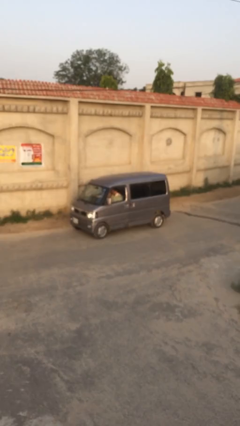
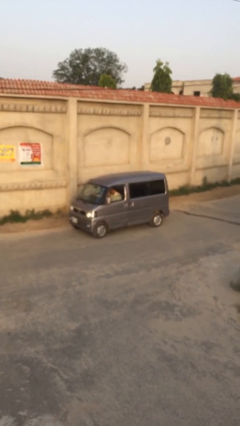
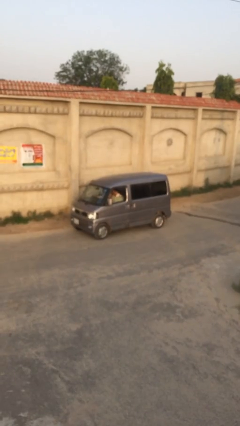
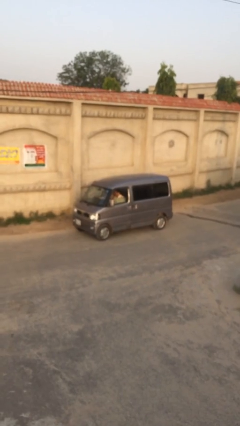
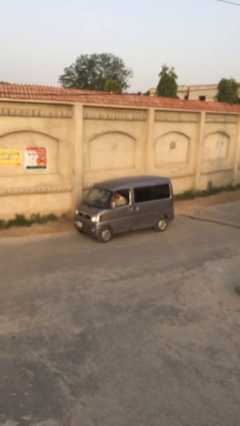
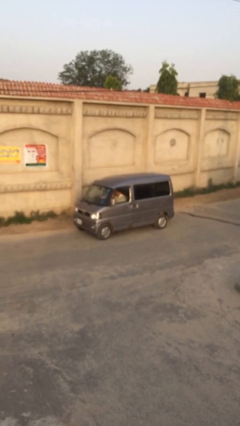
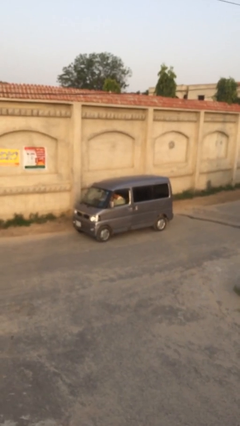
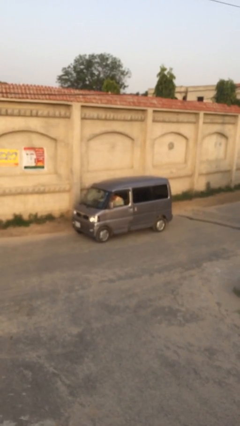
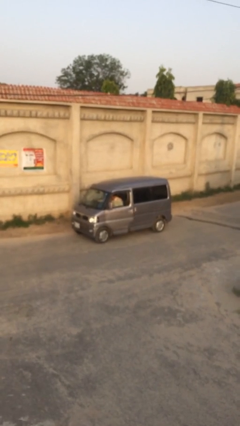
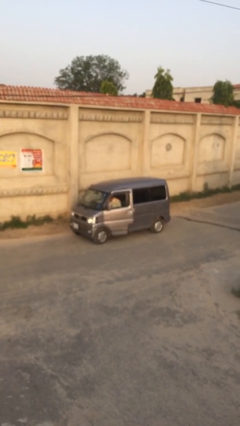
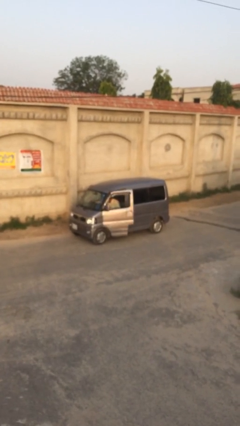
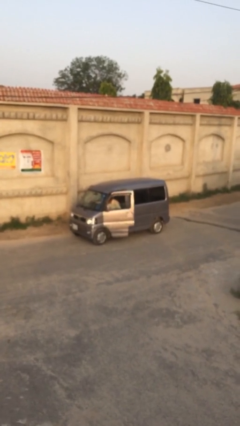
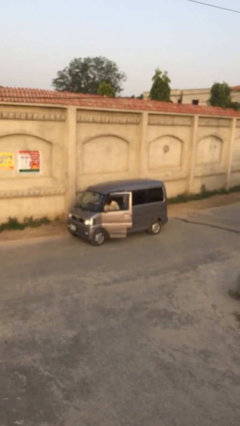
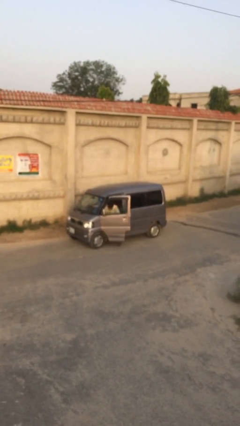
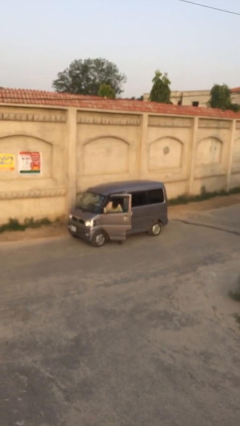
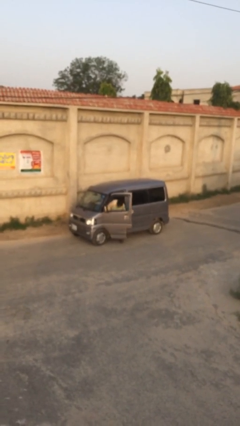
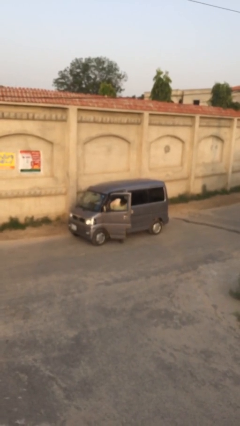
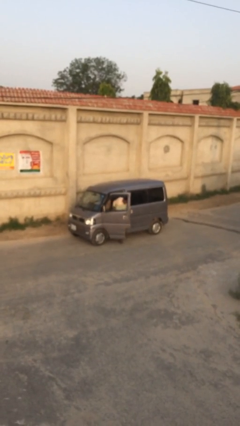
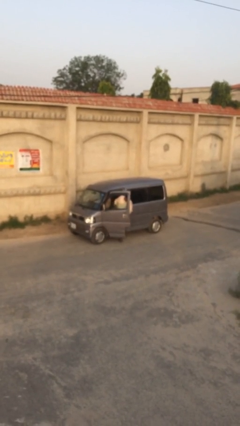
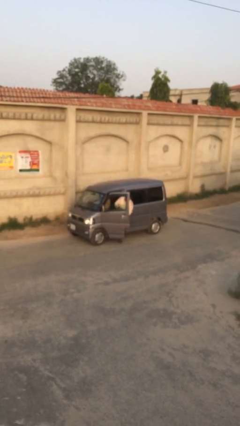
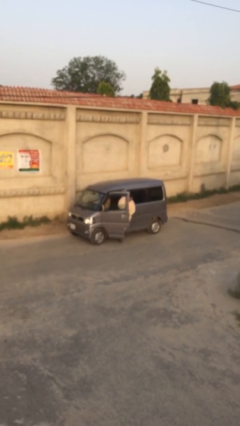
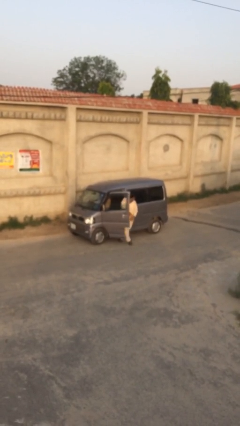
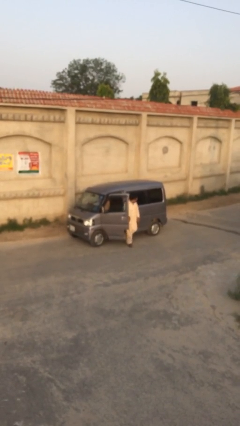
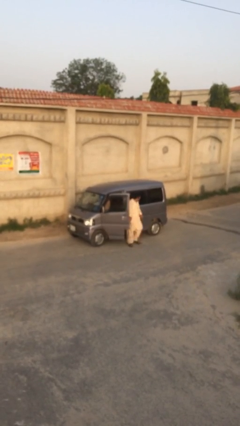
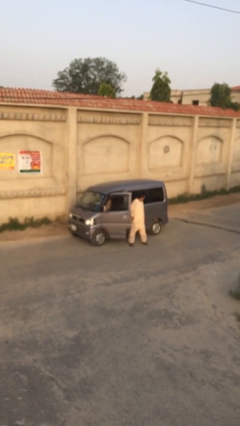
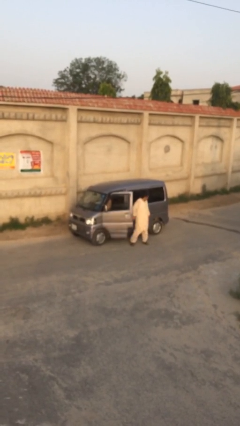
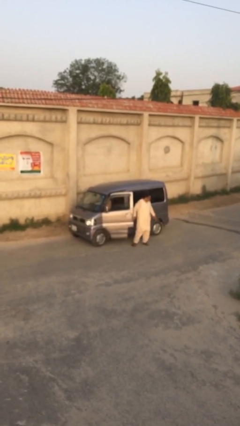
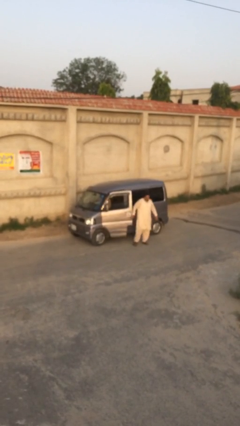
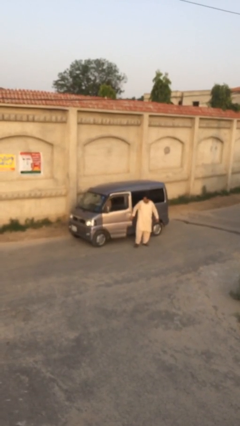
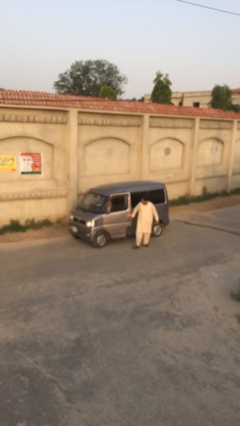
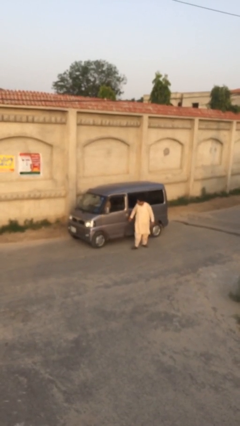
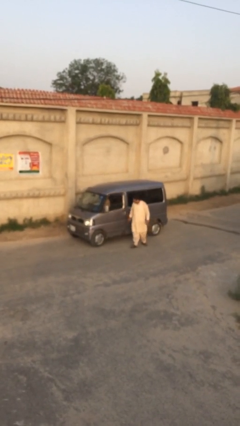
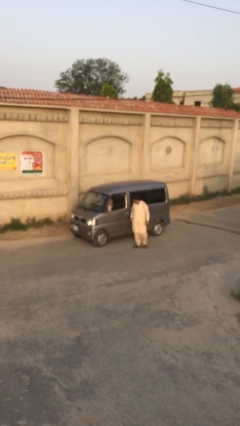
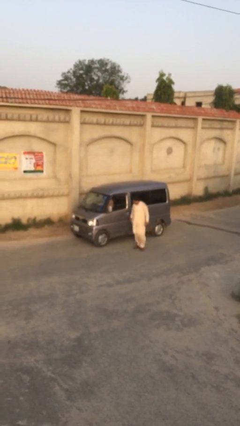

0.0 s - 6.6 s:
car drops off person

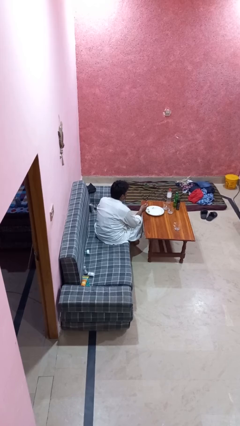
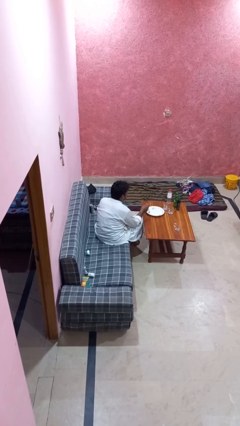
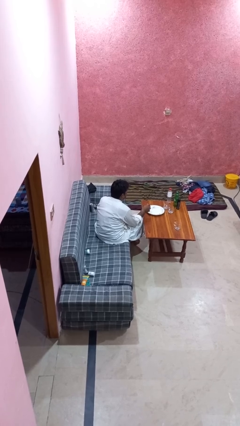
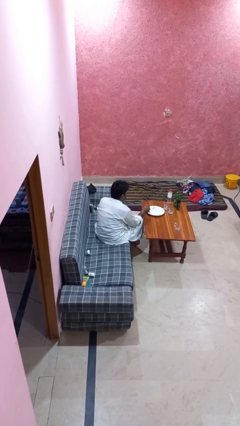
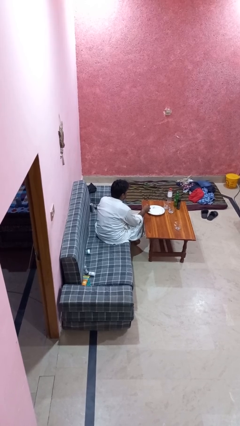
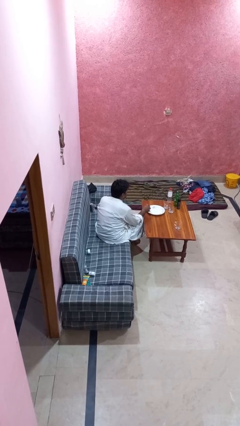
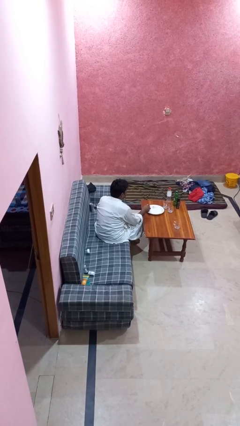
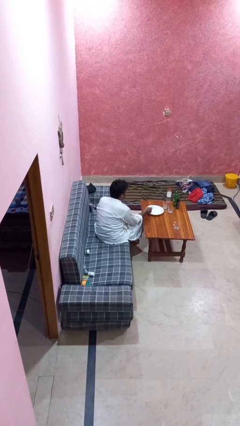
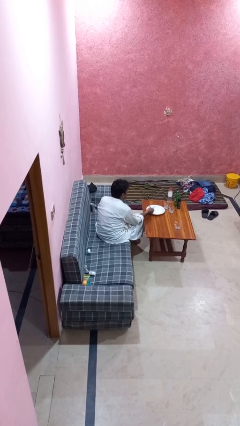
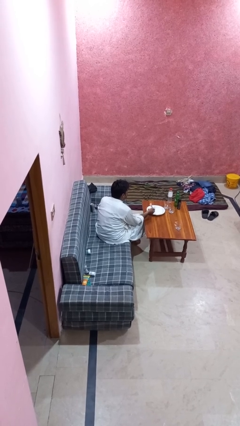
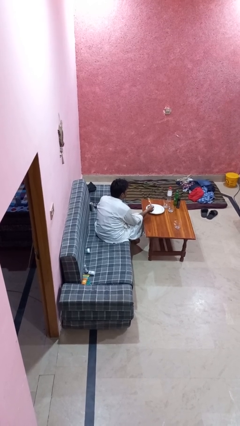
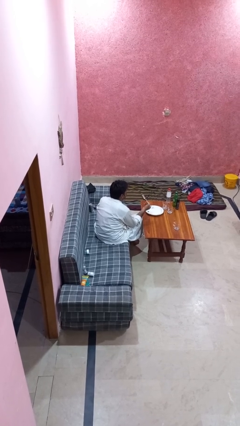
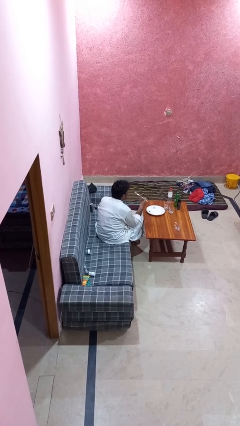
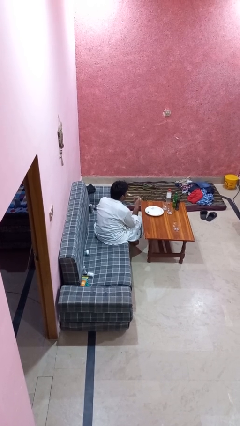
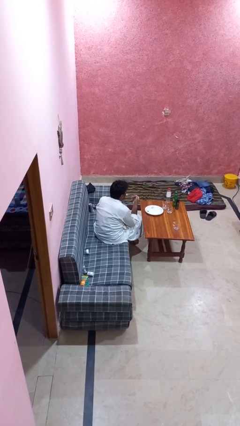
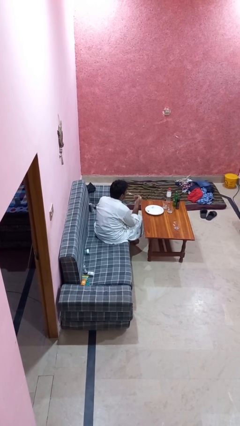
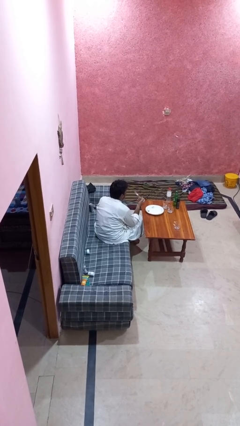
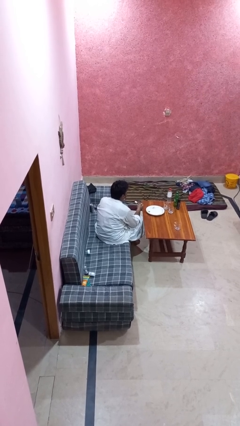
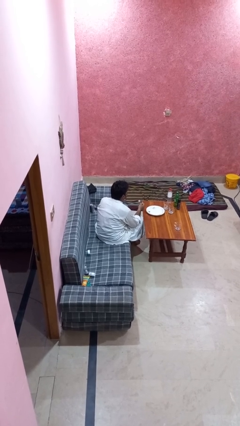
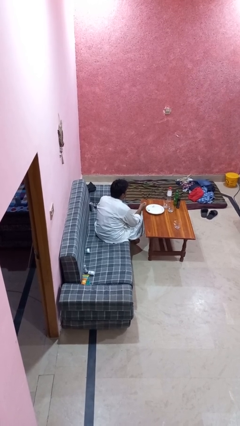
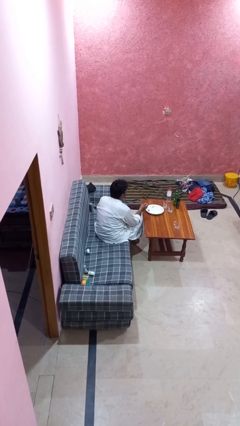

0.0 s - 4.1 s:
person eats with utensil

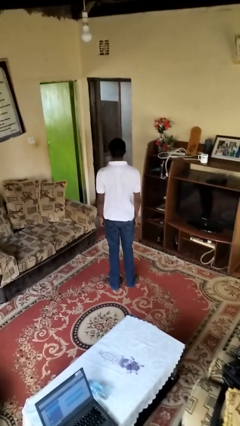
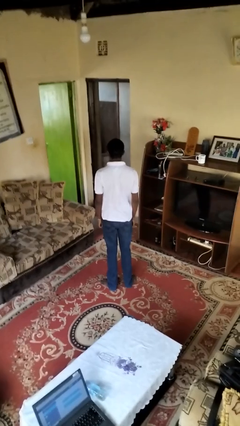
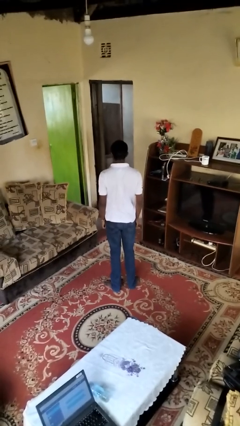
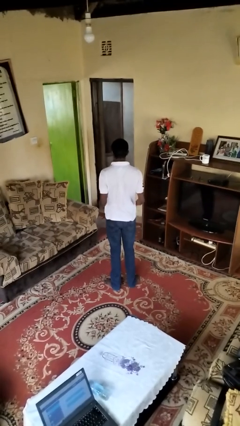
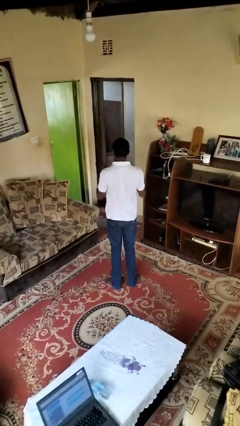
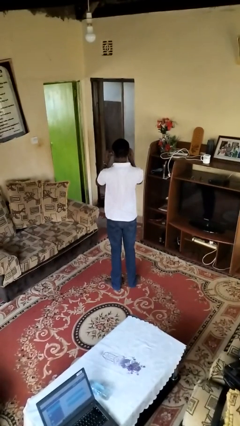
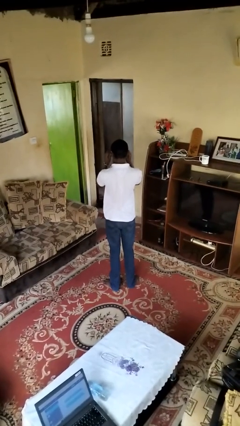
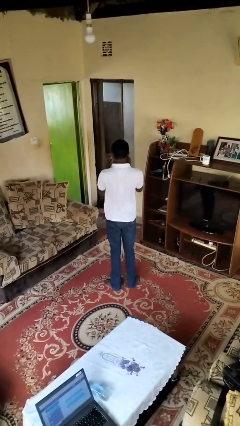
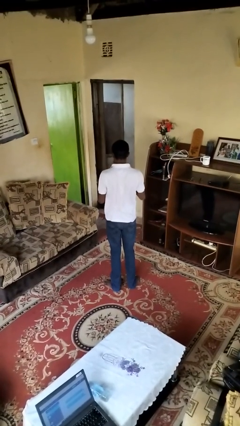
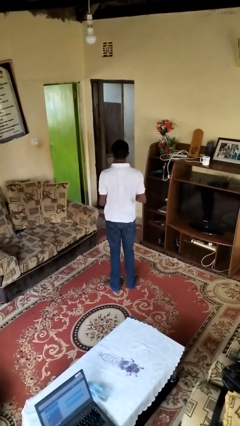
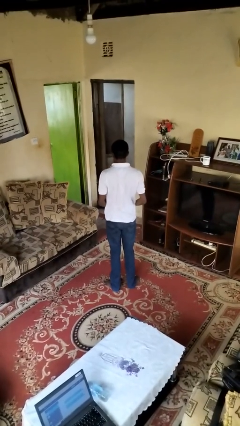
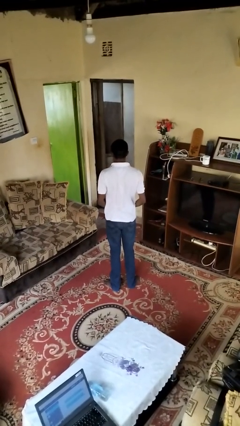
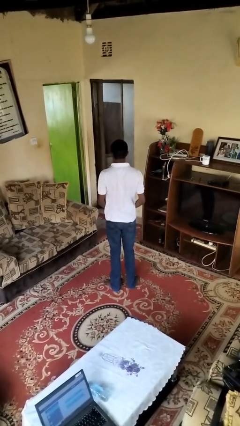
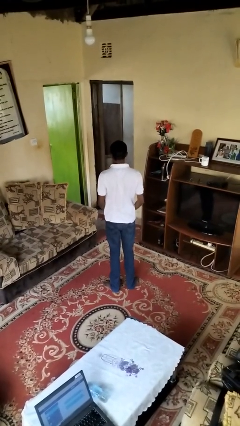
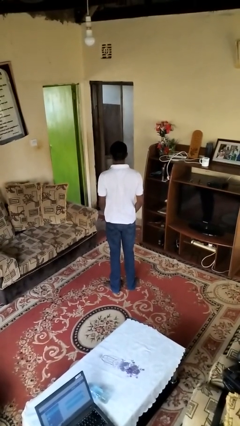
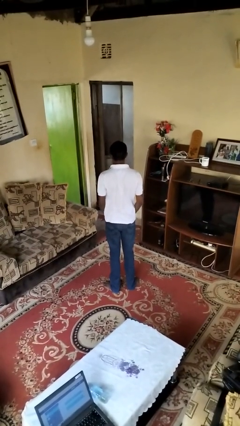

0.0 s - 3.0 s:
person takes off sunglasses

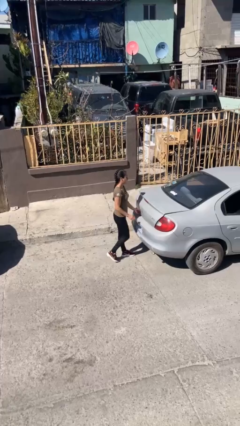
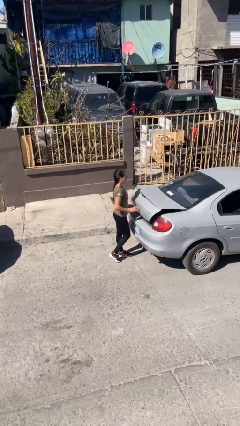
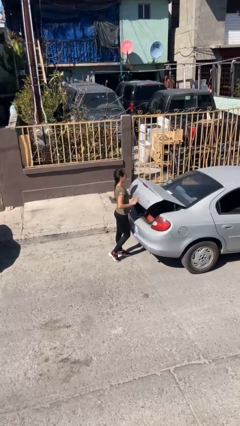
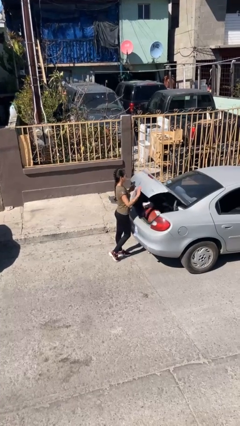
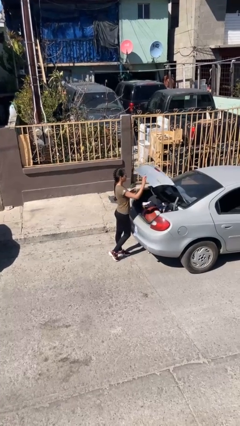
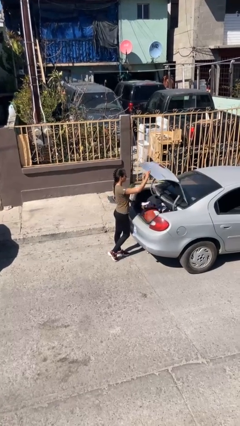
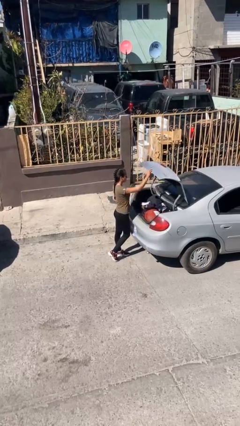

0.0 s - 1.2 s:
person opens car trunk

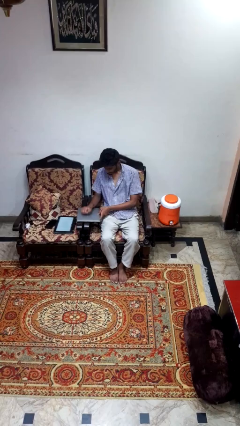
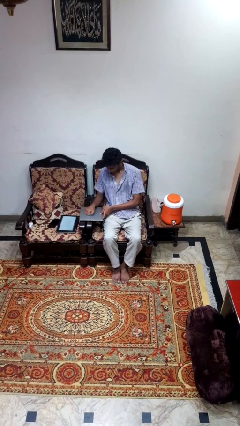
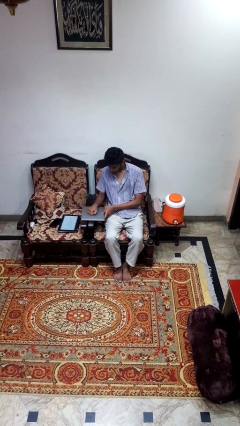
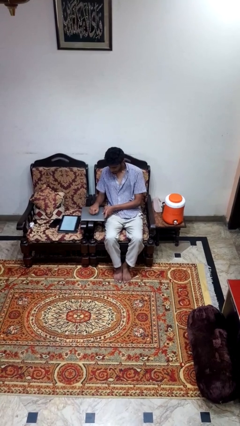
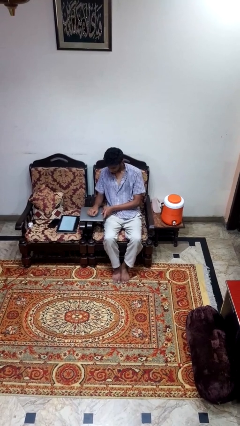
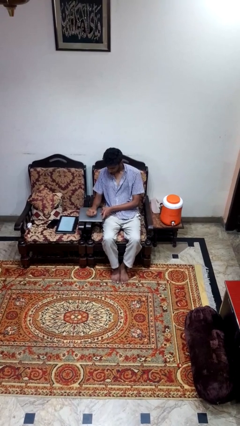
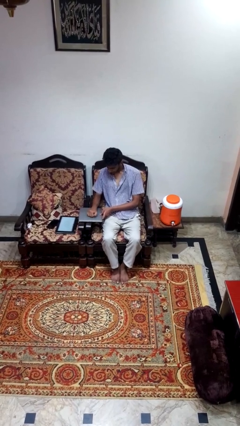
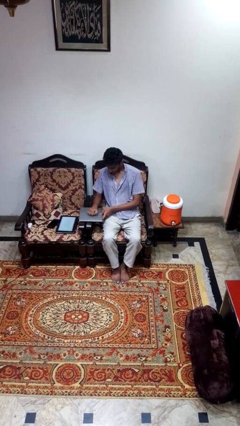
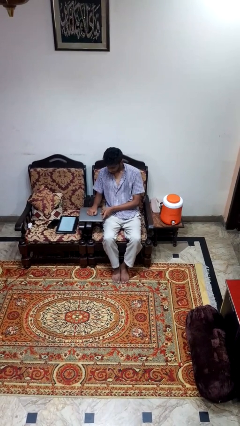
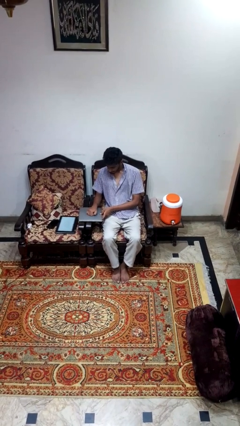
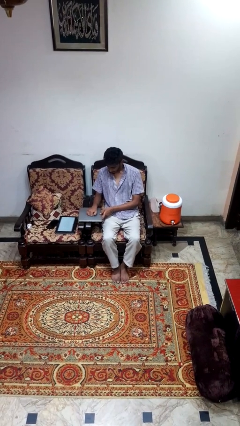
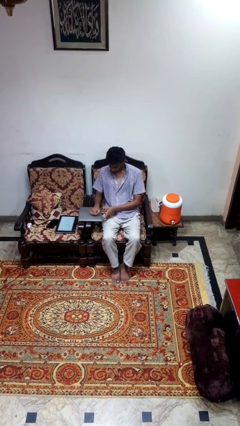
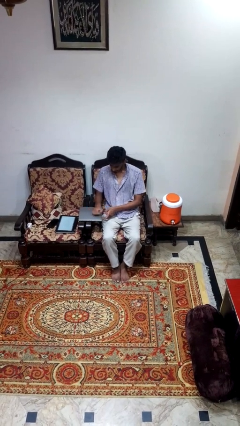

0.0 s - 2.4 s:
person taps object with finger
